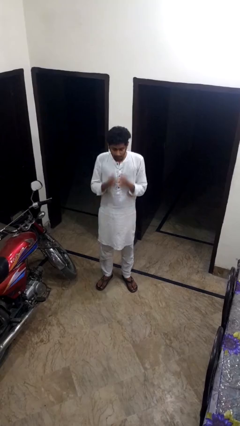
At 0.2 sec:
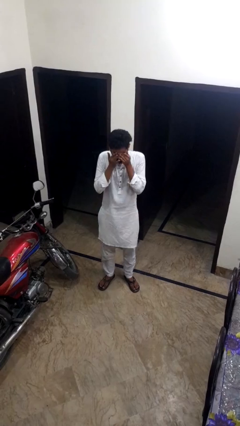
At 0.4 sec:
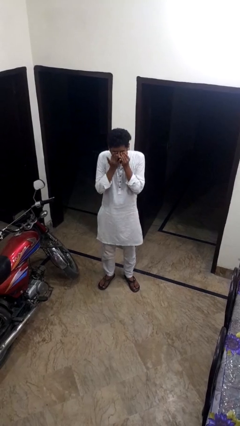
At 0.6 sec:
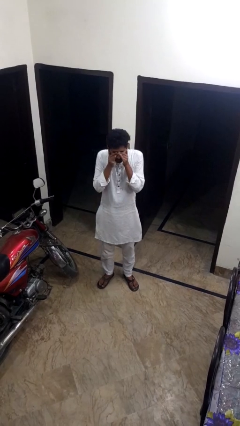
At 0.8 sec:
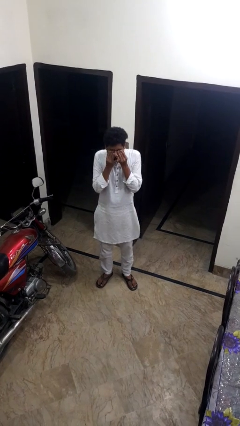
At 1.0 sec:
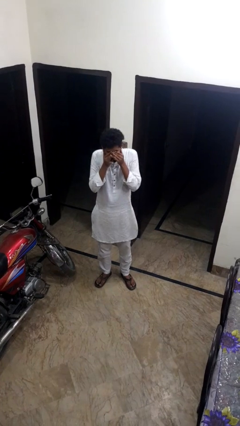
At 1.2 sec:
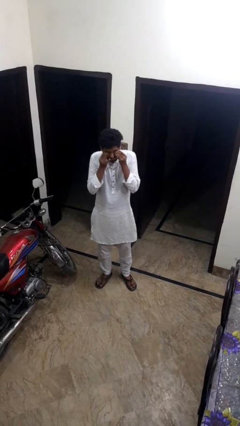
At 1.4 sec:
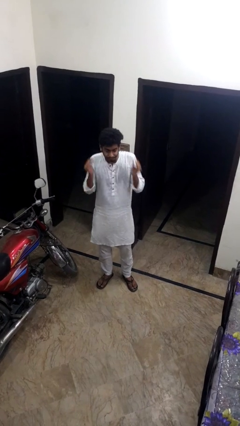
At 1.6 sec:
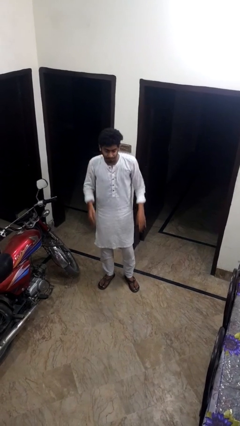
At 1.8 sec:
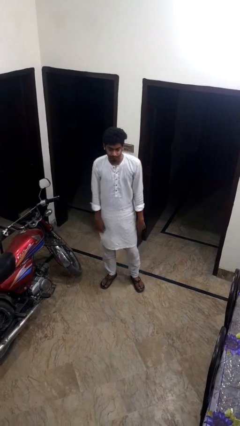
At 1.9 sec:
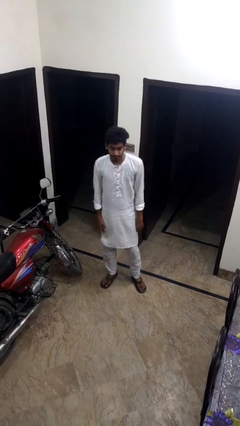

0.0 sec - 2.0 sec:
person rubs eyes

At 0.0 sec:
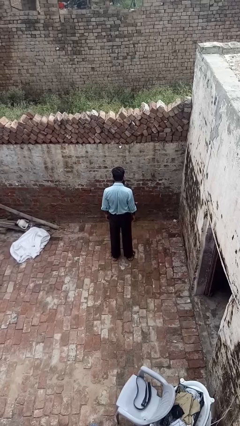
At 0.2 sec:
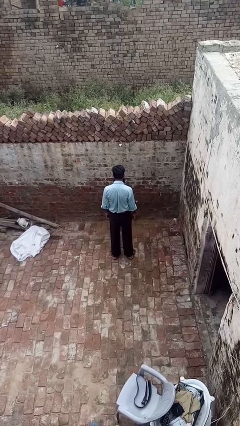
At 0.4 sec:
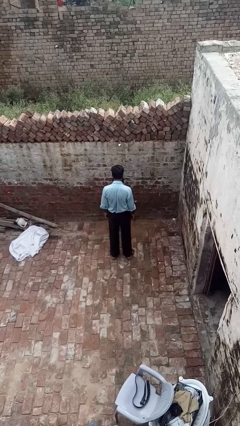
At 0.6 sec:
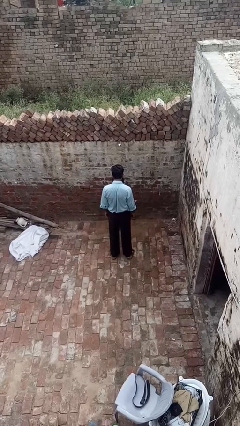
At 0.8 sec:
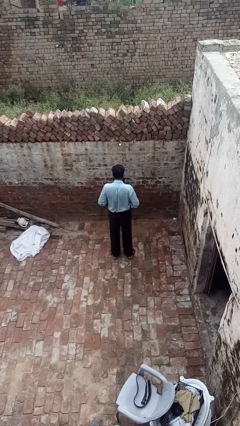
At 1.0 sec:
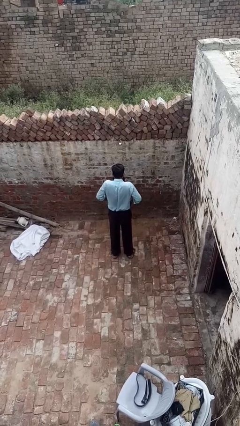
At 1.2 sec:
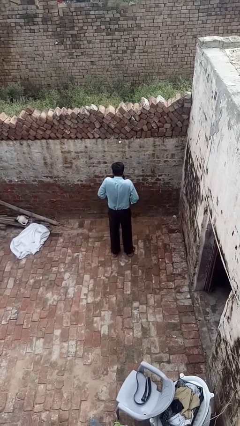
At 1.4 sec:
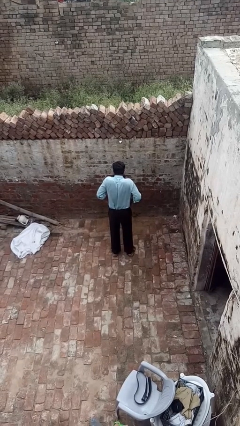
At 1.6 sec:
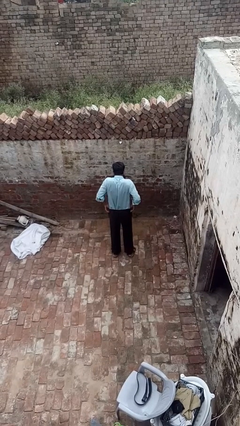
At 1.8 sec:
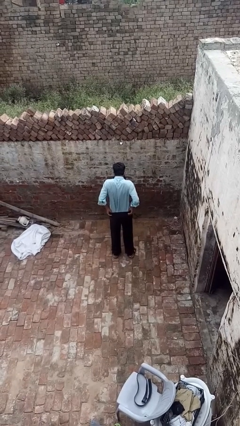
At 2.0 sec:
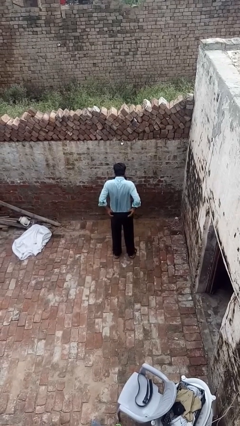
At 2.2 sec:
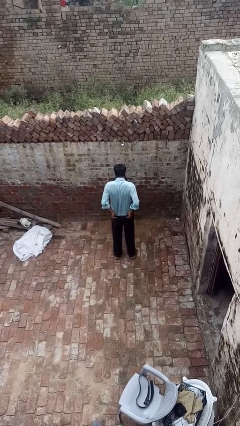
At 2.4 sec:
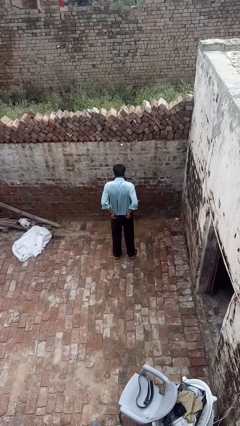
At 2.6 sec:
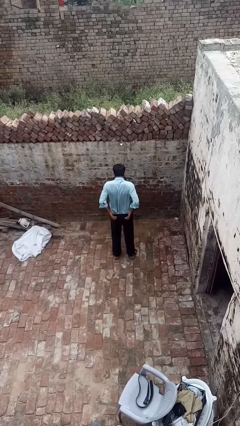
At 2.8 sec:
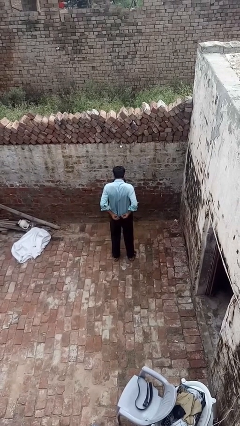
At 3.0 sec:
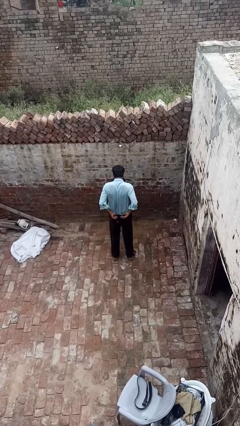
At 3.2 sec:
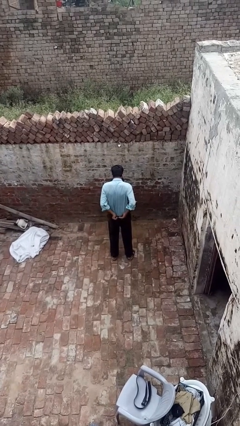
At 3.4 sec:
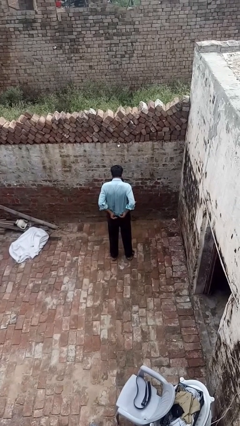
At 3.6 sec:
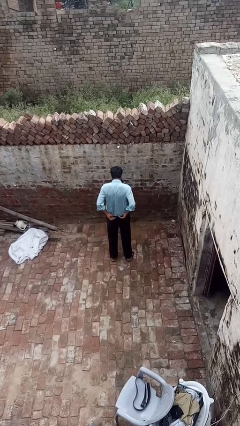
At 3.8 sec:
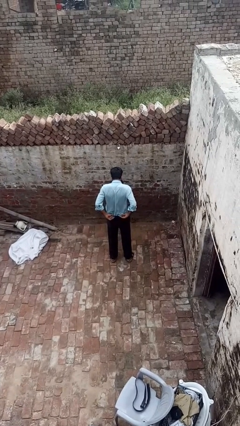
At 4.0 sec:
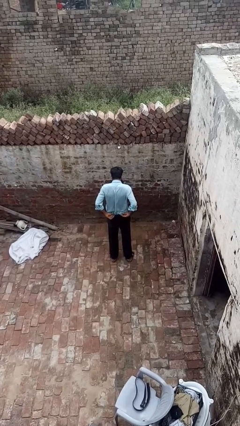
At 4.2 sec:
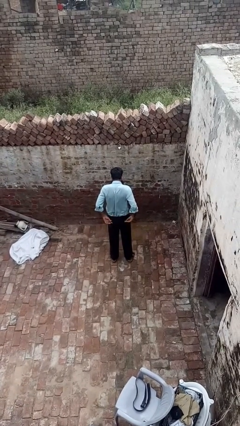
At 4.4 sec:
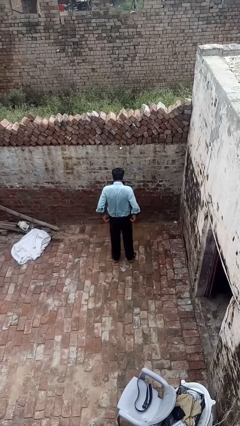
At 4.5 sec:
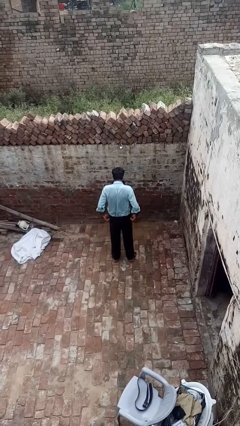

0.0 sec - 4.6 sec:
person hikes up pants

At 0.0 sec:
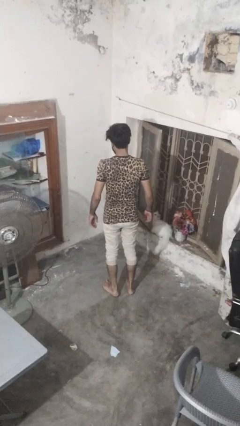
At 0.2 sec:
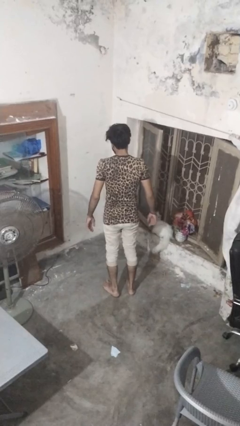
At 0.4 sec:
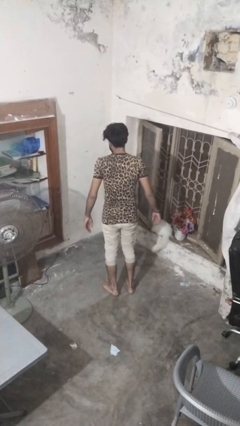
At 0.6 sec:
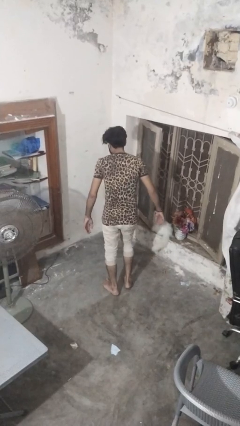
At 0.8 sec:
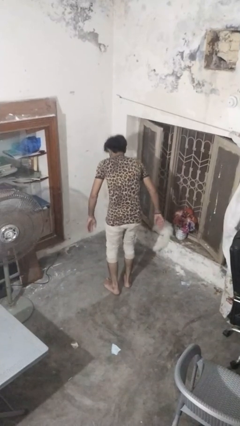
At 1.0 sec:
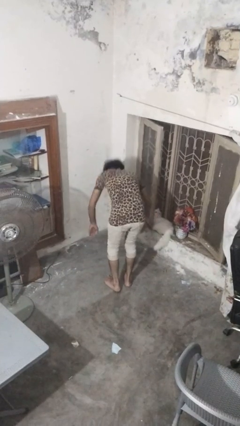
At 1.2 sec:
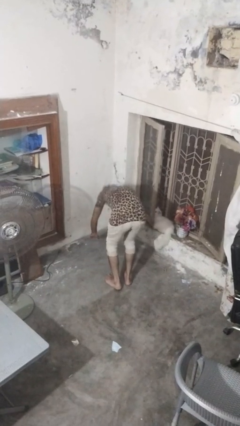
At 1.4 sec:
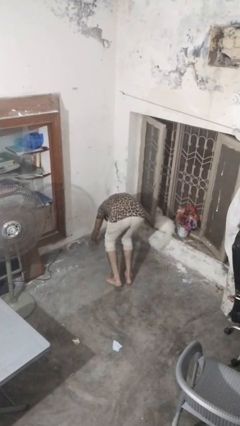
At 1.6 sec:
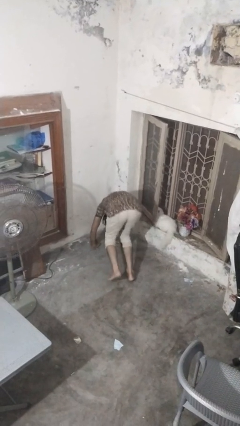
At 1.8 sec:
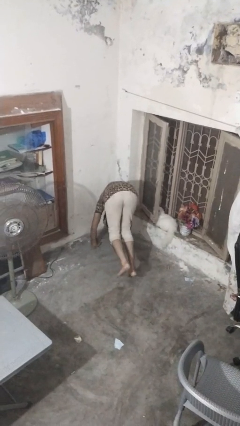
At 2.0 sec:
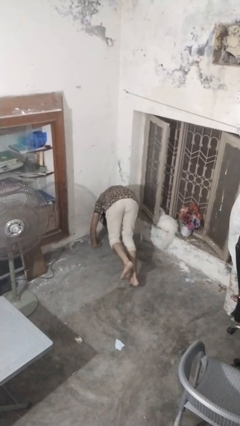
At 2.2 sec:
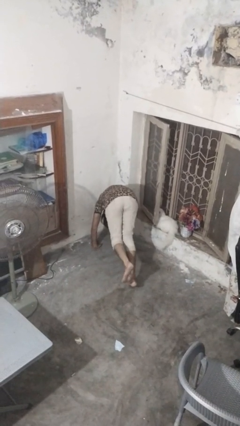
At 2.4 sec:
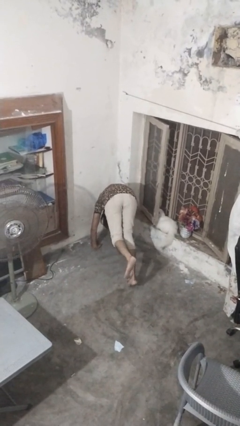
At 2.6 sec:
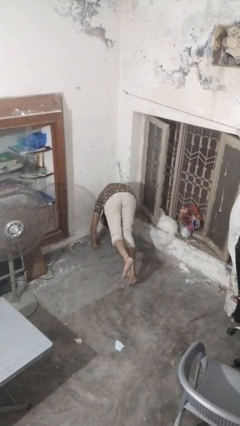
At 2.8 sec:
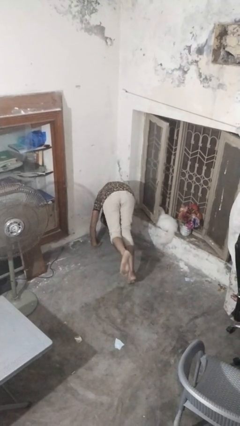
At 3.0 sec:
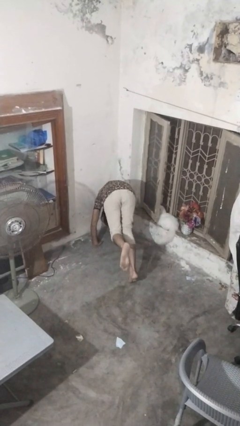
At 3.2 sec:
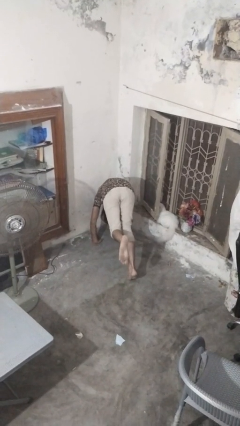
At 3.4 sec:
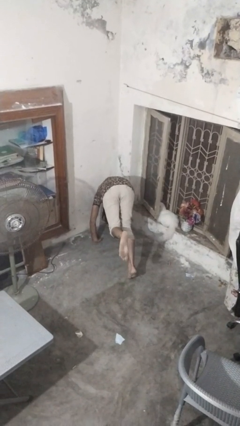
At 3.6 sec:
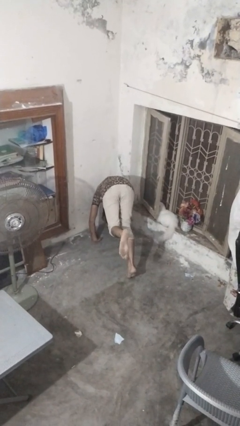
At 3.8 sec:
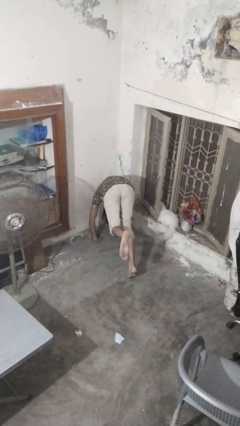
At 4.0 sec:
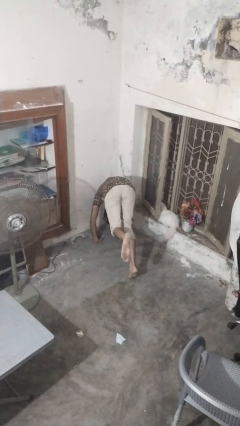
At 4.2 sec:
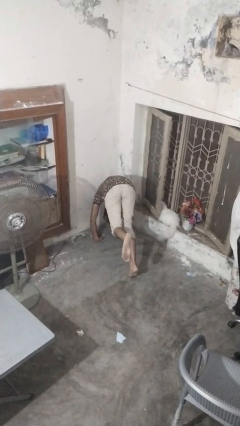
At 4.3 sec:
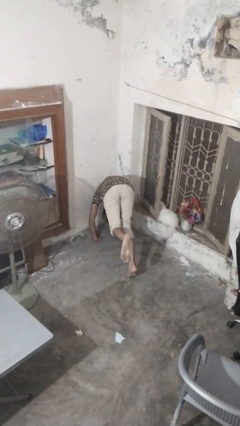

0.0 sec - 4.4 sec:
person handstand

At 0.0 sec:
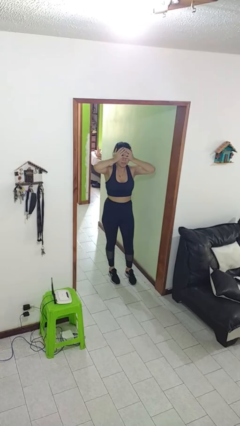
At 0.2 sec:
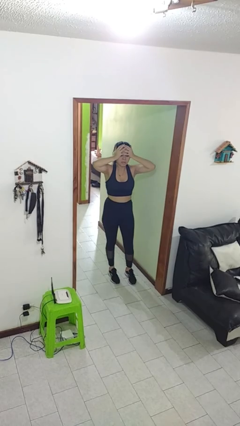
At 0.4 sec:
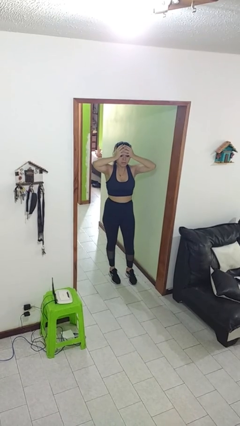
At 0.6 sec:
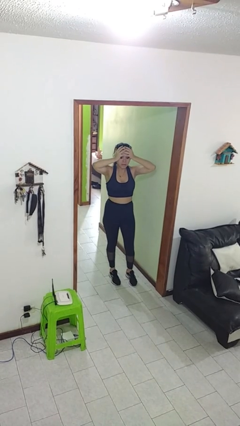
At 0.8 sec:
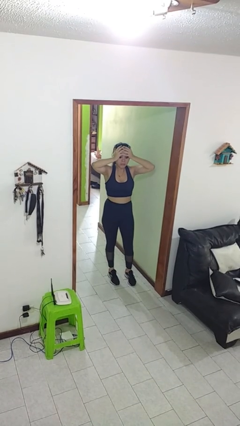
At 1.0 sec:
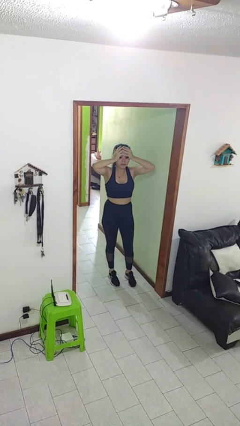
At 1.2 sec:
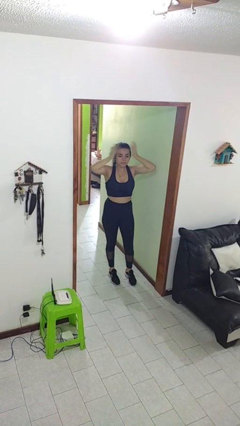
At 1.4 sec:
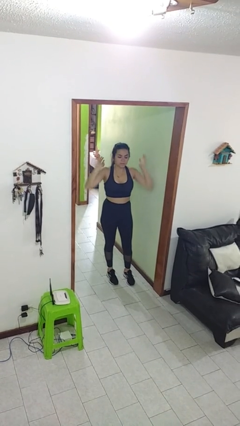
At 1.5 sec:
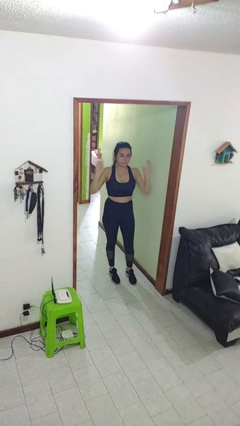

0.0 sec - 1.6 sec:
person covers face with hands

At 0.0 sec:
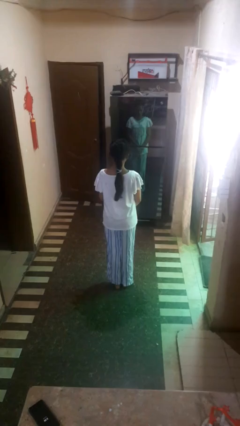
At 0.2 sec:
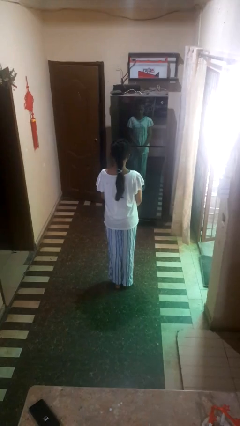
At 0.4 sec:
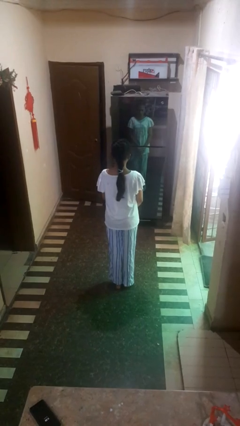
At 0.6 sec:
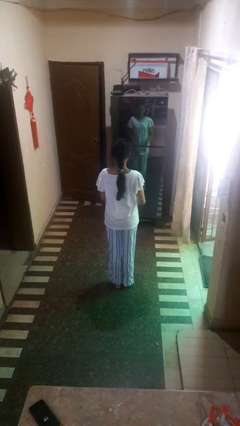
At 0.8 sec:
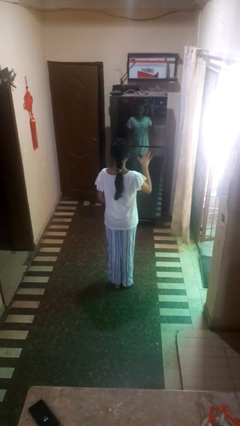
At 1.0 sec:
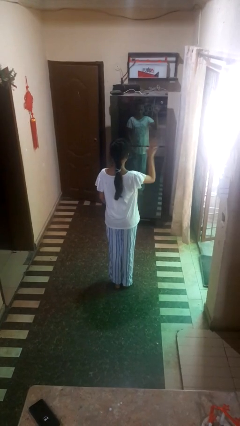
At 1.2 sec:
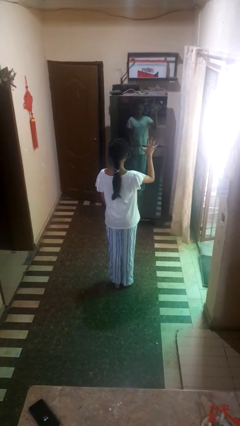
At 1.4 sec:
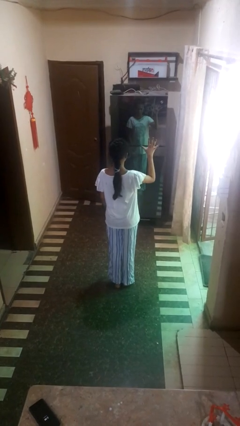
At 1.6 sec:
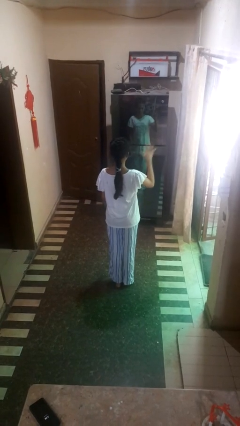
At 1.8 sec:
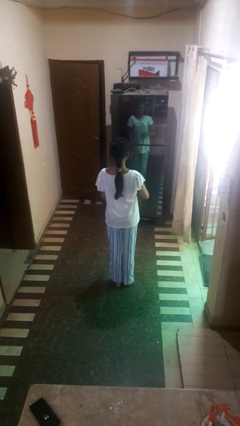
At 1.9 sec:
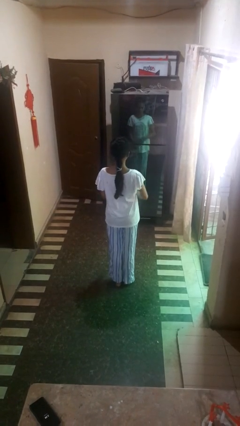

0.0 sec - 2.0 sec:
person gestures number five

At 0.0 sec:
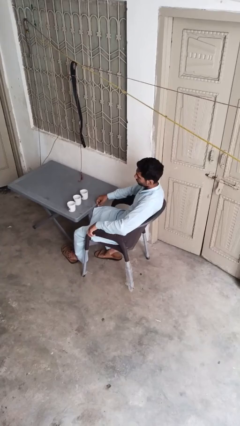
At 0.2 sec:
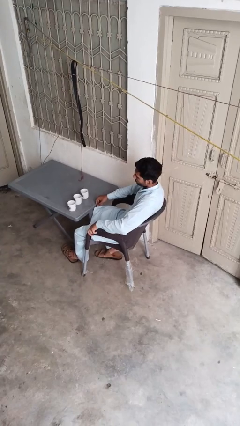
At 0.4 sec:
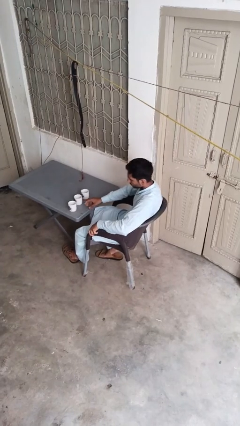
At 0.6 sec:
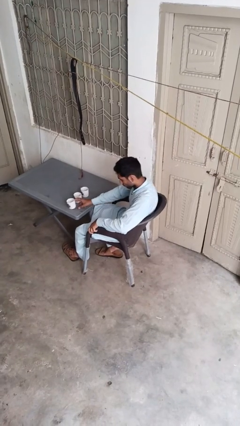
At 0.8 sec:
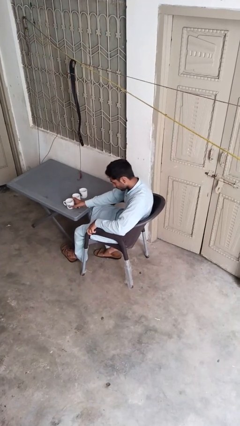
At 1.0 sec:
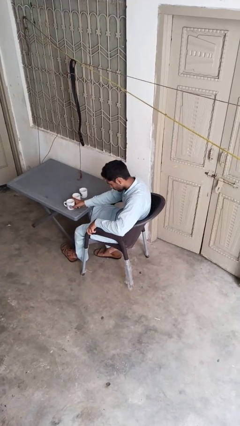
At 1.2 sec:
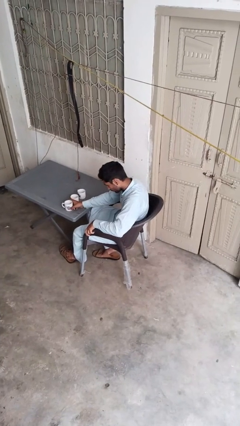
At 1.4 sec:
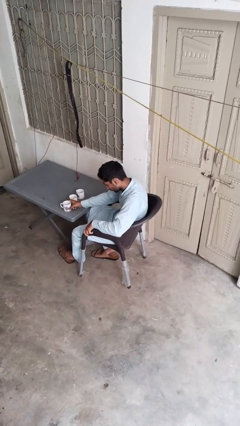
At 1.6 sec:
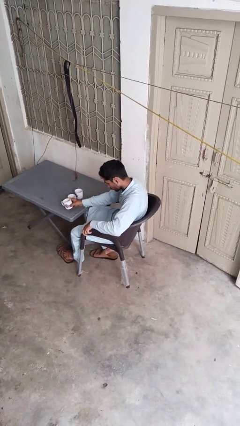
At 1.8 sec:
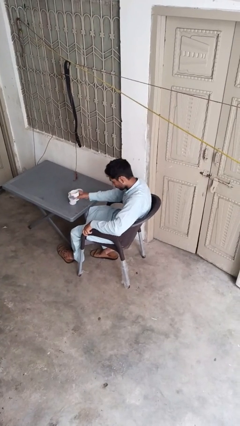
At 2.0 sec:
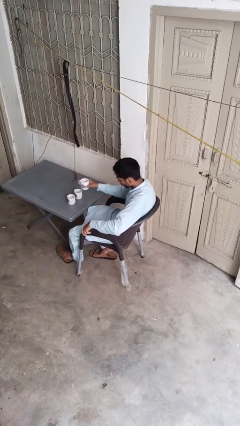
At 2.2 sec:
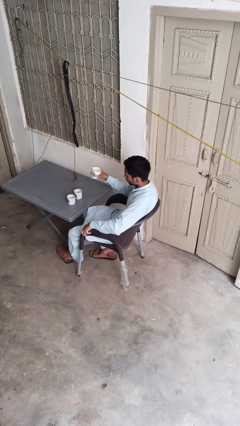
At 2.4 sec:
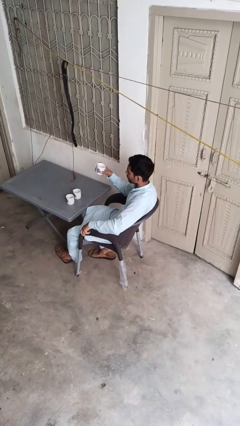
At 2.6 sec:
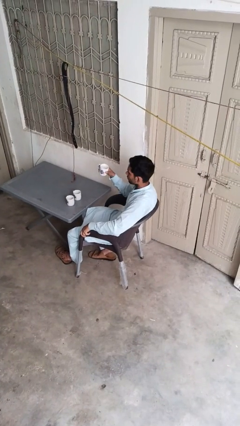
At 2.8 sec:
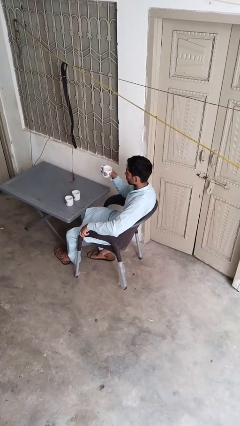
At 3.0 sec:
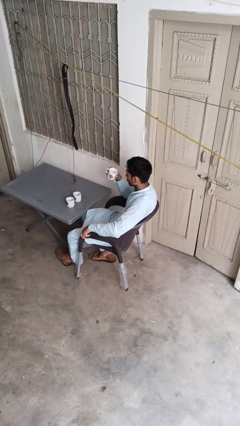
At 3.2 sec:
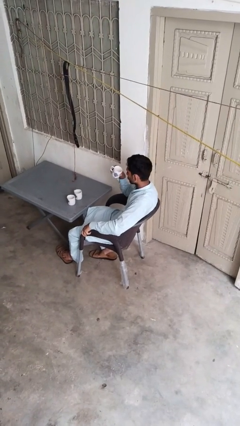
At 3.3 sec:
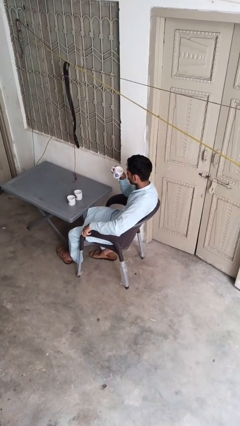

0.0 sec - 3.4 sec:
person picks up object from table
